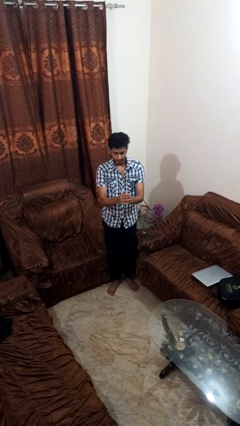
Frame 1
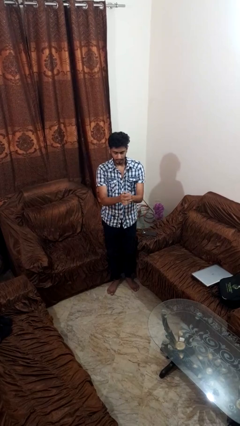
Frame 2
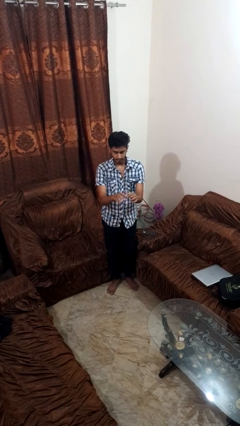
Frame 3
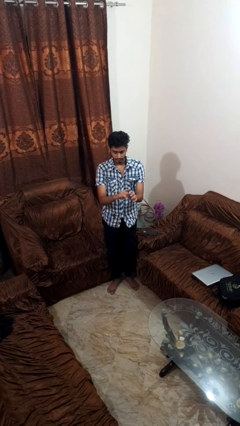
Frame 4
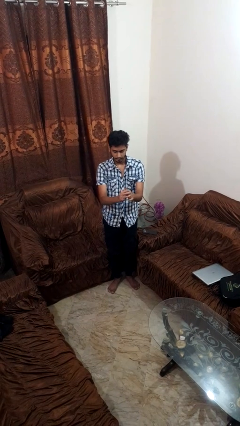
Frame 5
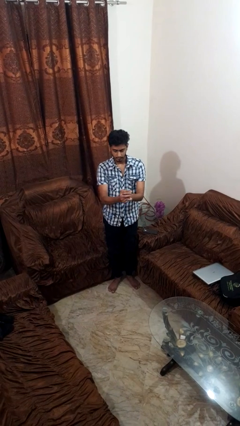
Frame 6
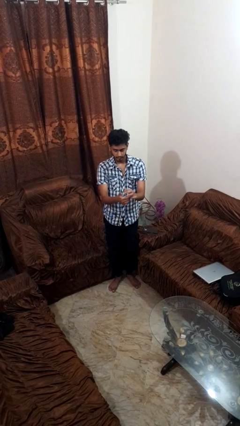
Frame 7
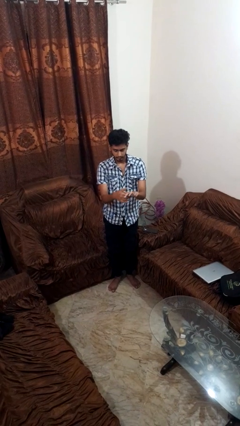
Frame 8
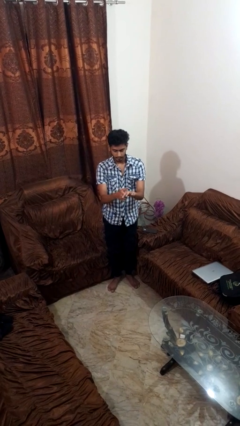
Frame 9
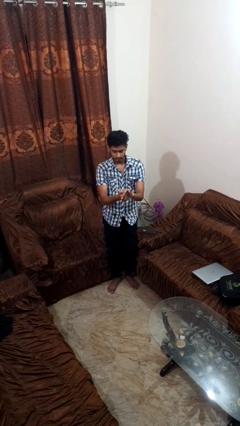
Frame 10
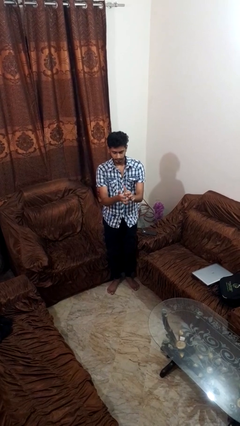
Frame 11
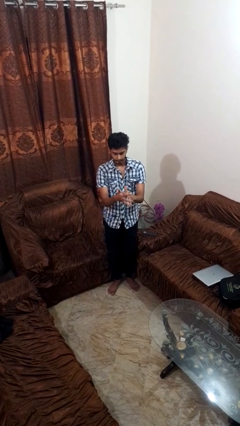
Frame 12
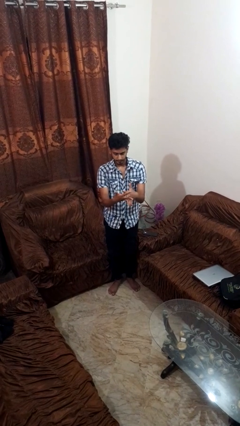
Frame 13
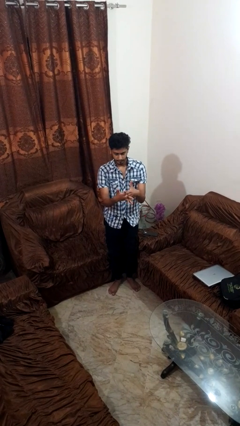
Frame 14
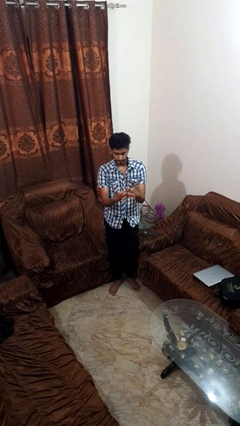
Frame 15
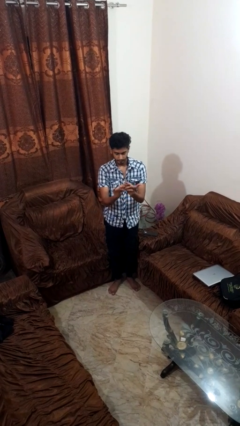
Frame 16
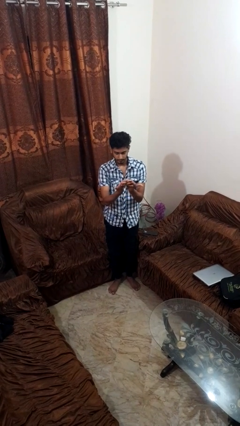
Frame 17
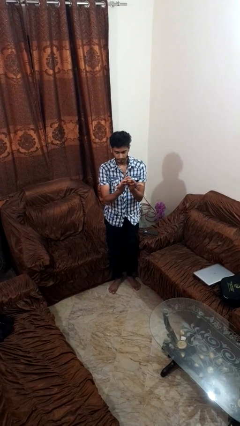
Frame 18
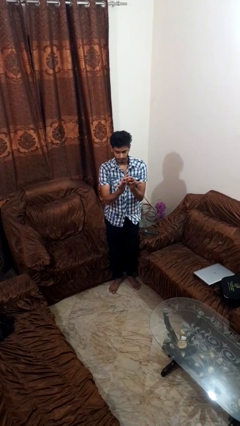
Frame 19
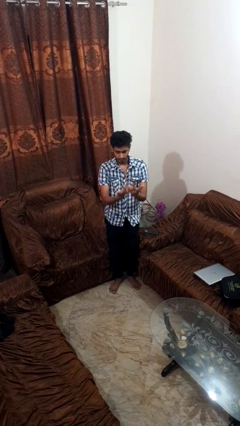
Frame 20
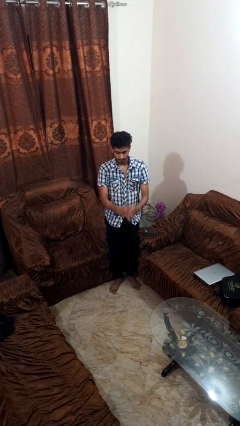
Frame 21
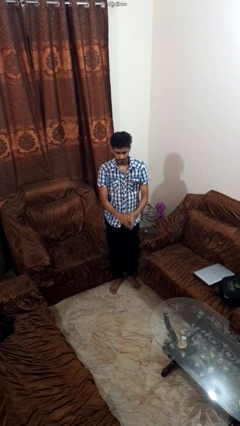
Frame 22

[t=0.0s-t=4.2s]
person cracks knuckles

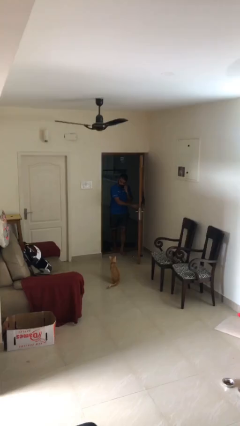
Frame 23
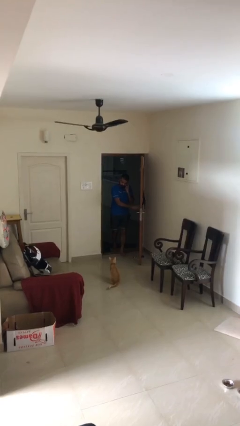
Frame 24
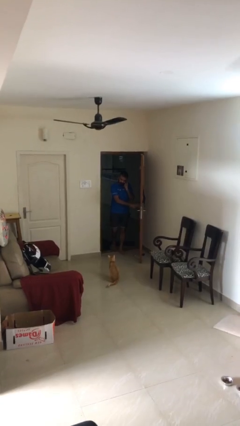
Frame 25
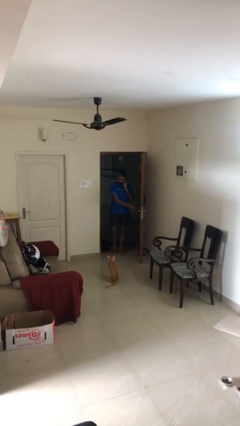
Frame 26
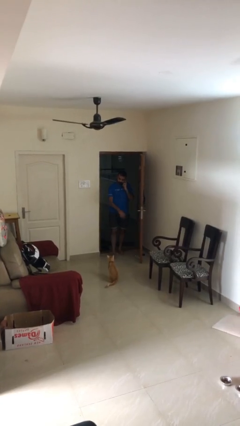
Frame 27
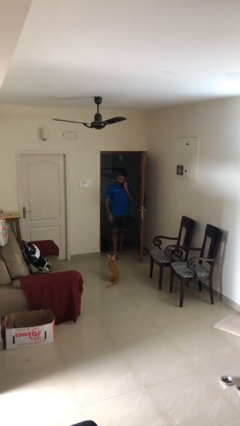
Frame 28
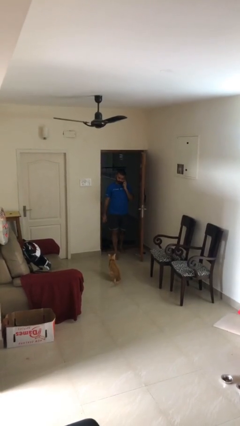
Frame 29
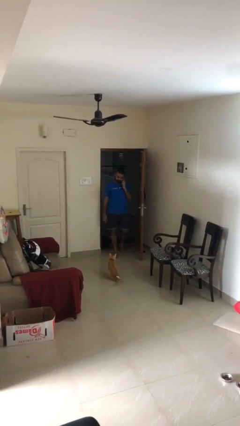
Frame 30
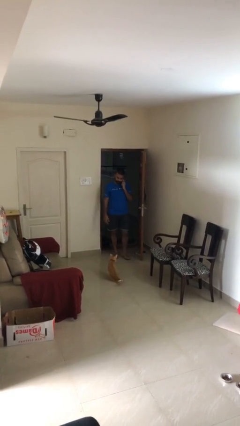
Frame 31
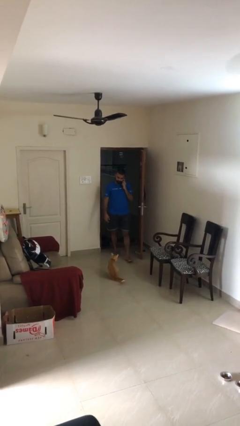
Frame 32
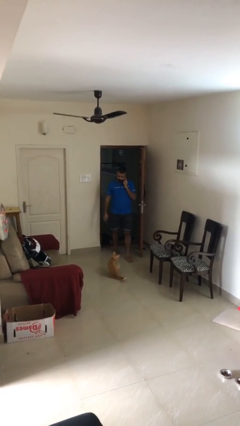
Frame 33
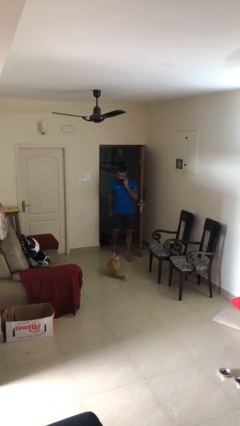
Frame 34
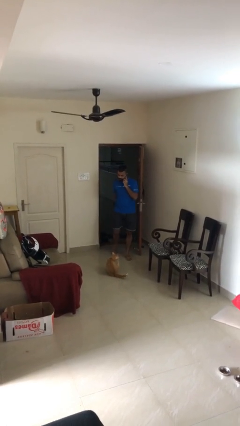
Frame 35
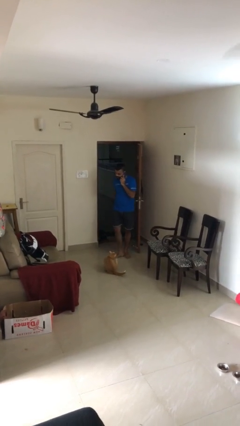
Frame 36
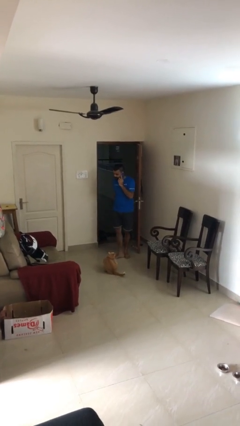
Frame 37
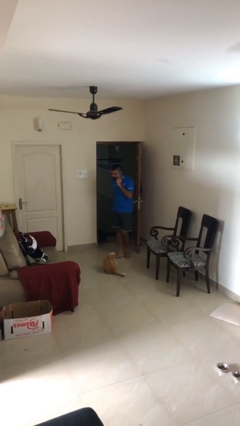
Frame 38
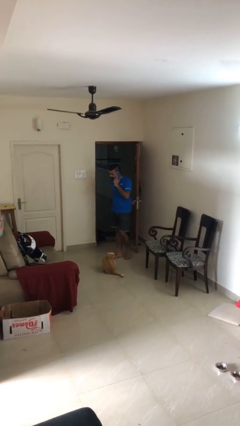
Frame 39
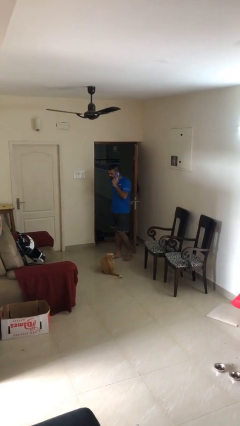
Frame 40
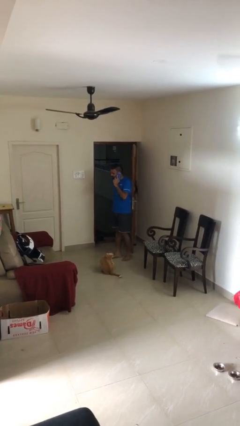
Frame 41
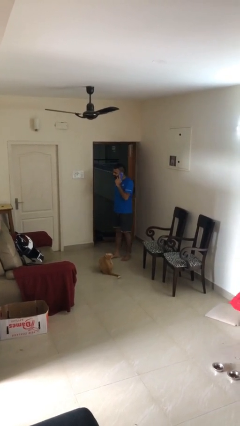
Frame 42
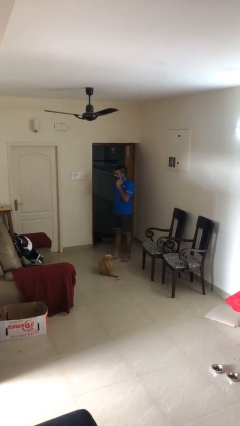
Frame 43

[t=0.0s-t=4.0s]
person enters scene through structure

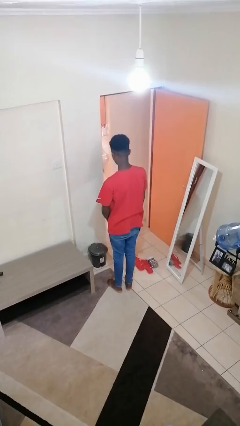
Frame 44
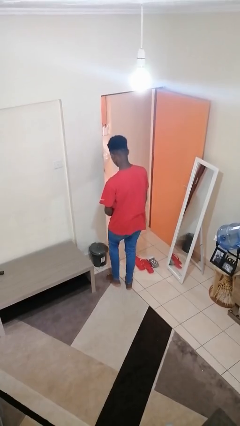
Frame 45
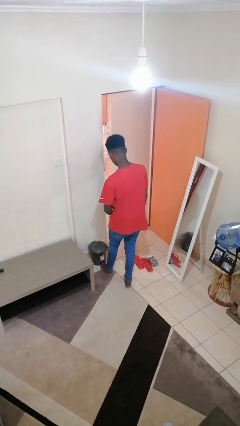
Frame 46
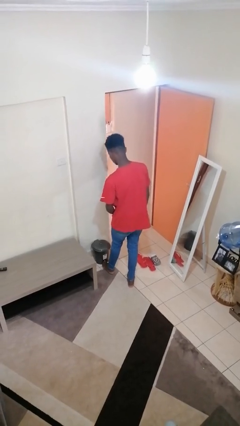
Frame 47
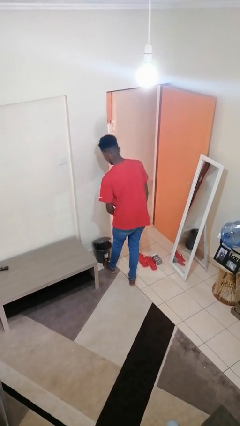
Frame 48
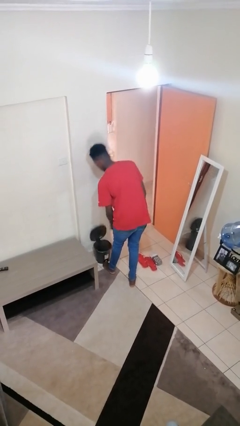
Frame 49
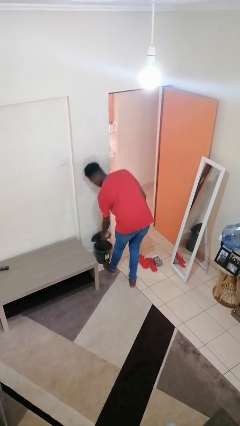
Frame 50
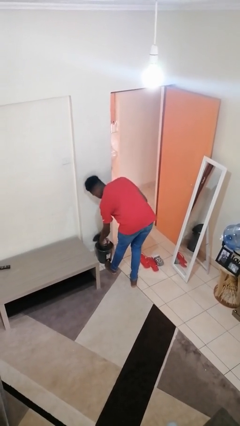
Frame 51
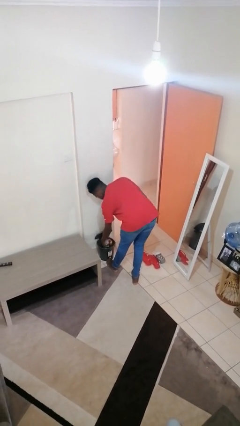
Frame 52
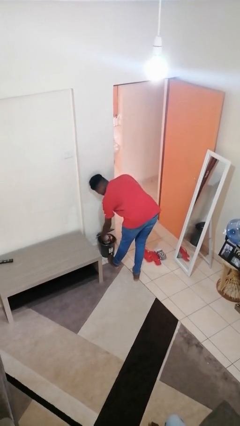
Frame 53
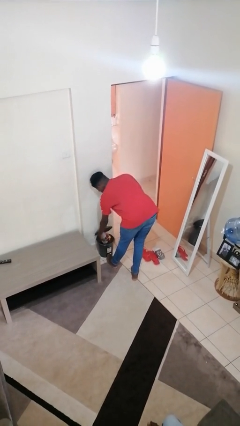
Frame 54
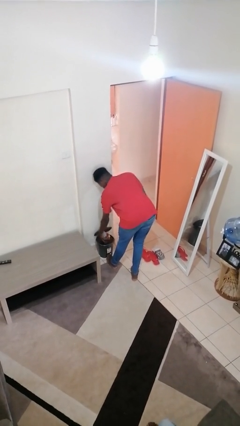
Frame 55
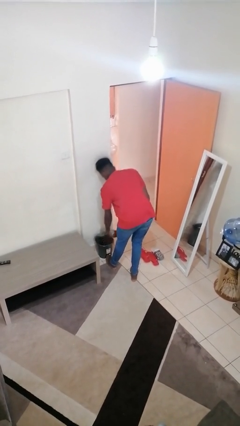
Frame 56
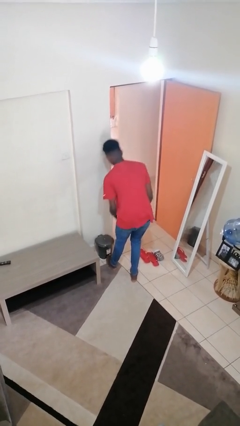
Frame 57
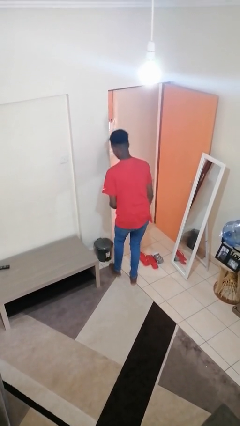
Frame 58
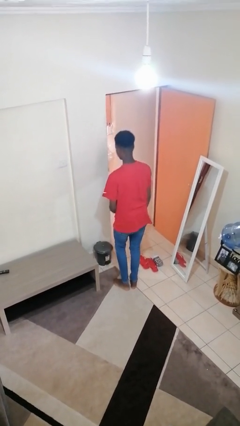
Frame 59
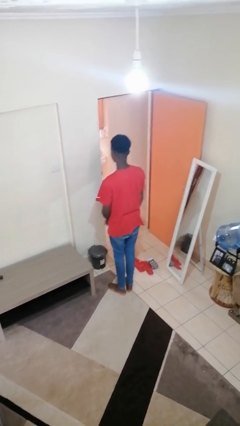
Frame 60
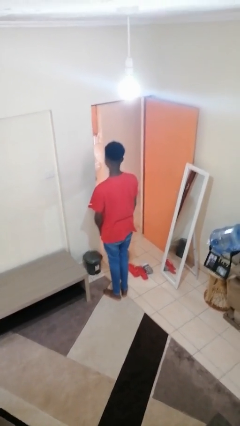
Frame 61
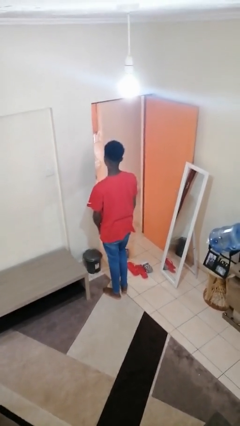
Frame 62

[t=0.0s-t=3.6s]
person discards trash

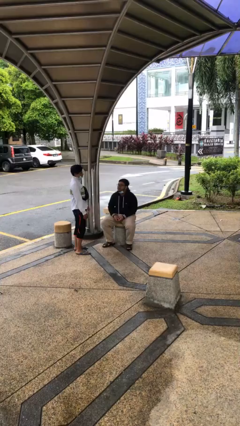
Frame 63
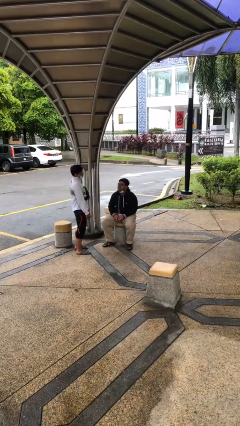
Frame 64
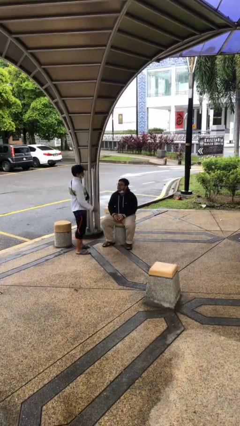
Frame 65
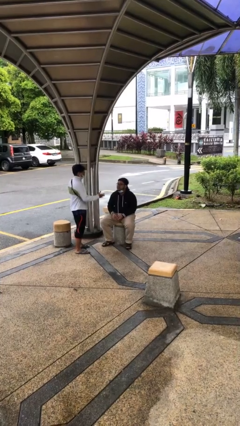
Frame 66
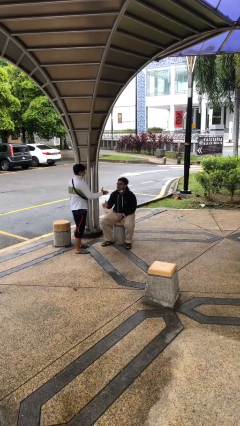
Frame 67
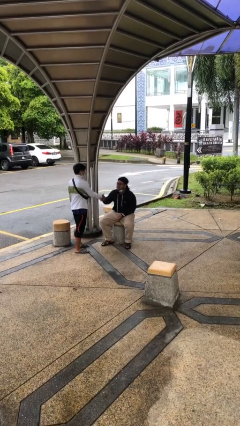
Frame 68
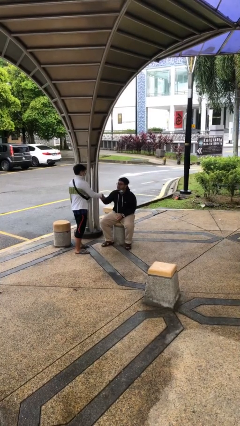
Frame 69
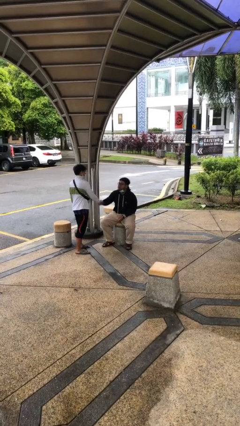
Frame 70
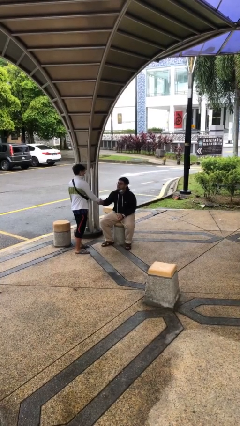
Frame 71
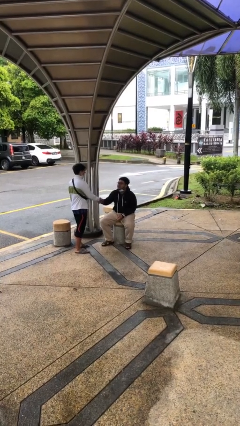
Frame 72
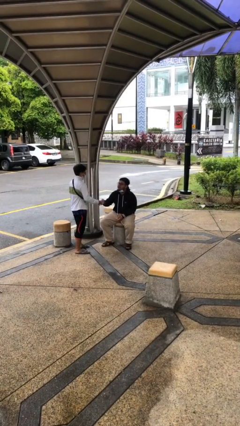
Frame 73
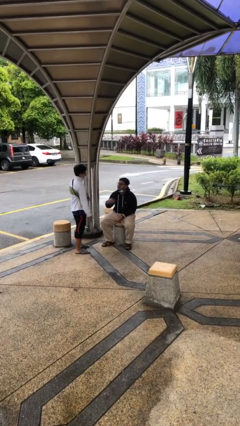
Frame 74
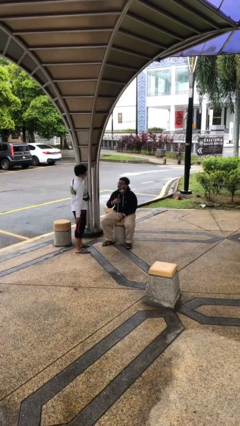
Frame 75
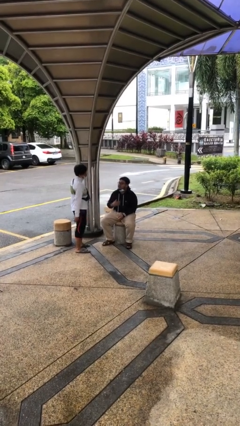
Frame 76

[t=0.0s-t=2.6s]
person shakes hand

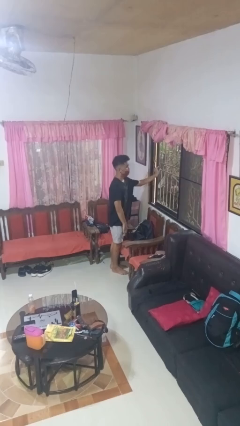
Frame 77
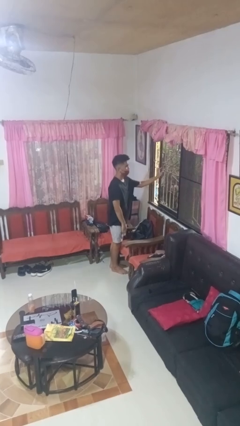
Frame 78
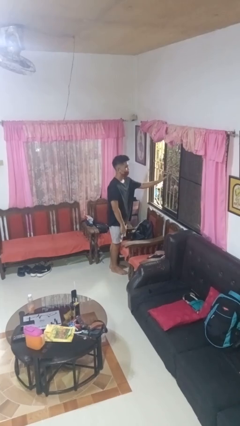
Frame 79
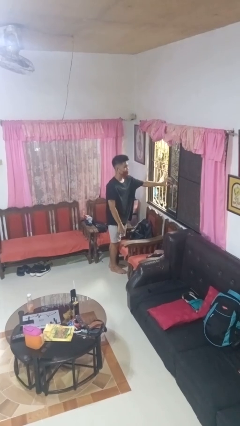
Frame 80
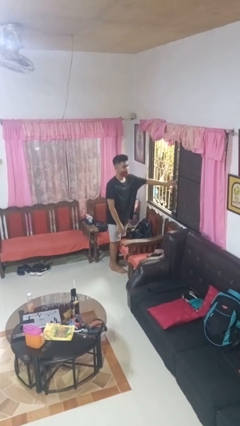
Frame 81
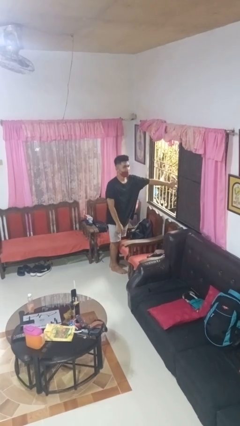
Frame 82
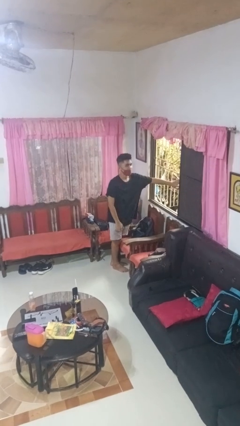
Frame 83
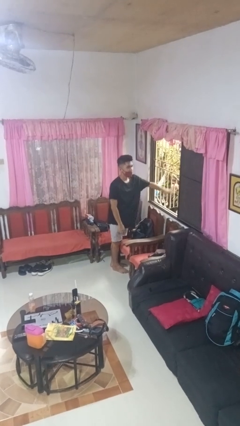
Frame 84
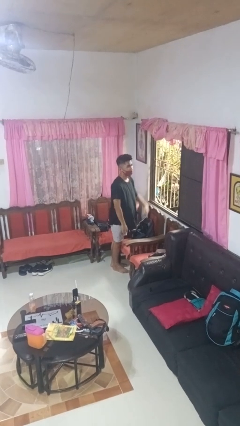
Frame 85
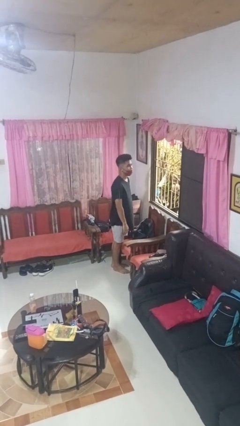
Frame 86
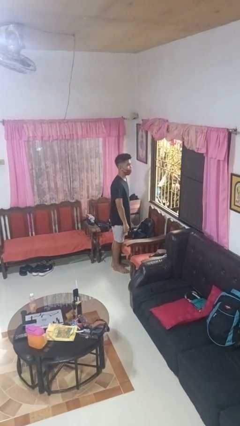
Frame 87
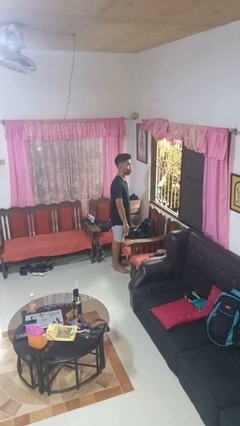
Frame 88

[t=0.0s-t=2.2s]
person opens home window

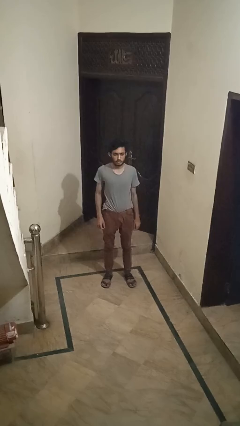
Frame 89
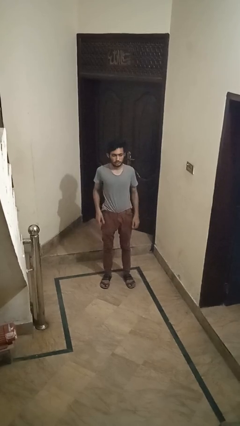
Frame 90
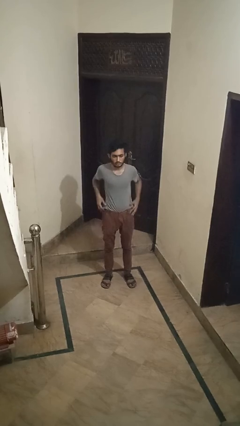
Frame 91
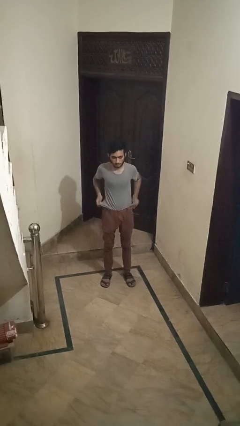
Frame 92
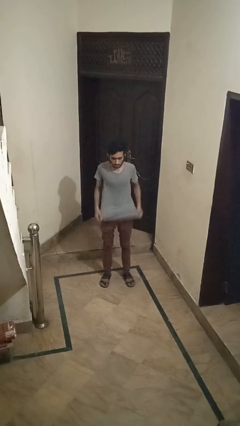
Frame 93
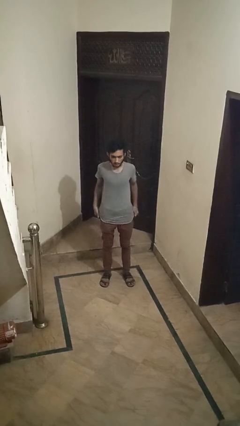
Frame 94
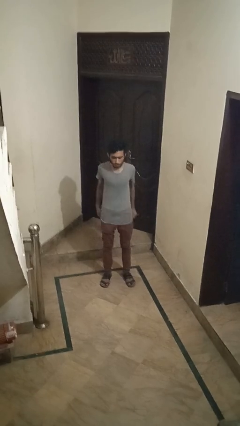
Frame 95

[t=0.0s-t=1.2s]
person untucks shirt
